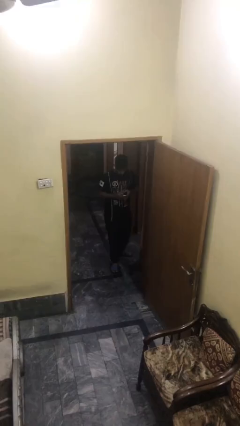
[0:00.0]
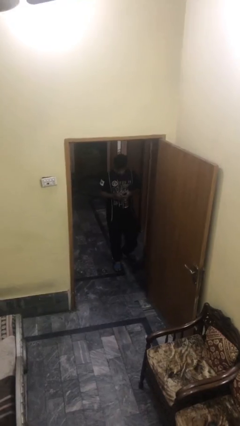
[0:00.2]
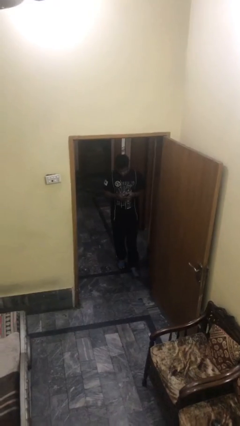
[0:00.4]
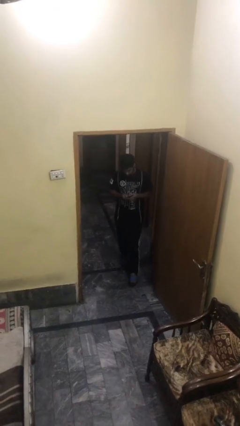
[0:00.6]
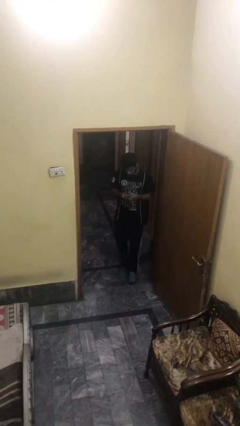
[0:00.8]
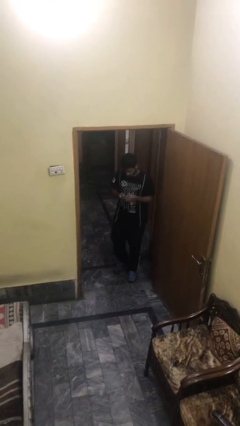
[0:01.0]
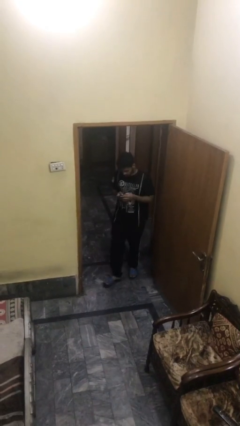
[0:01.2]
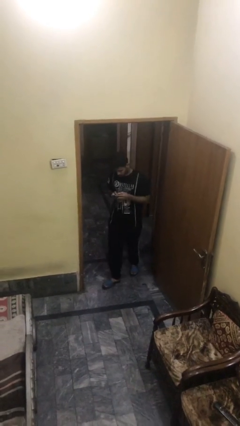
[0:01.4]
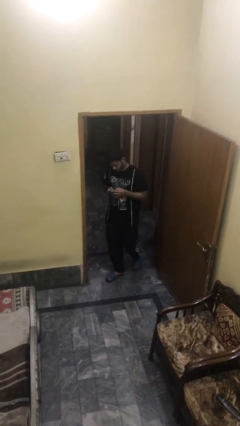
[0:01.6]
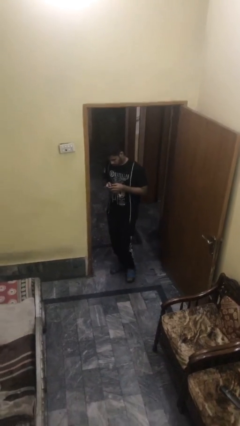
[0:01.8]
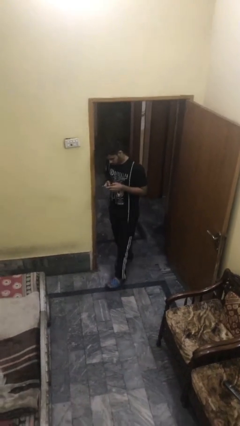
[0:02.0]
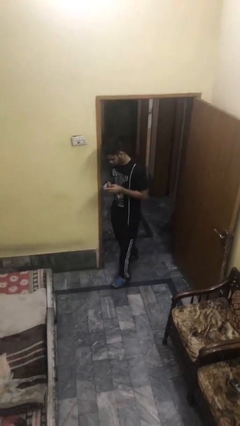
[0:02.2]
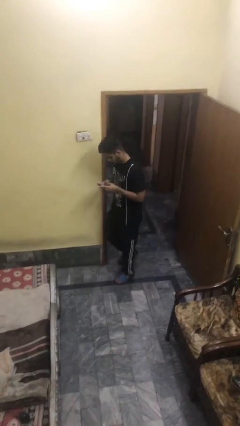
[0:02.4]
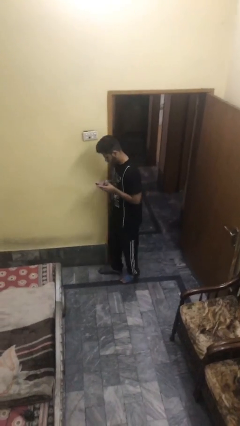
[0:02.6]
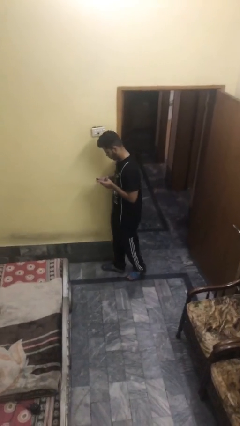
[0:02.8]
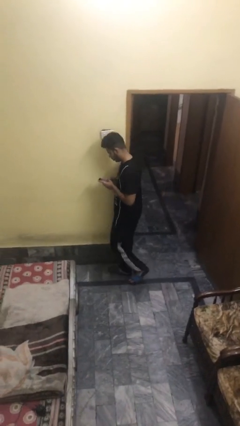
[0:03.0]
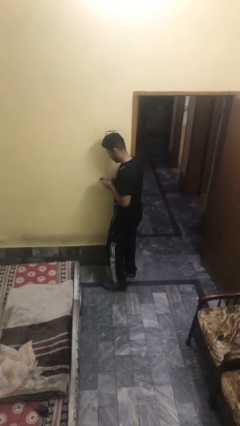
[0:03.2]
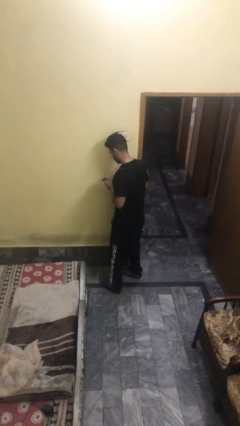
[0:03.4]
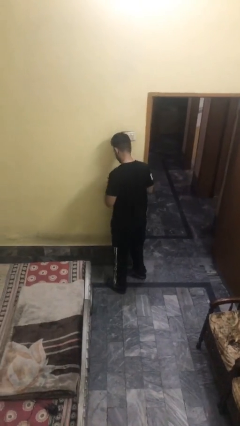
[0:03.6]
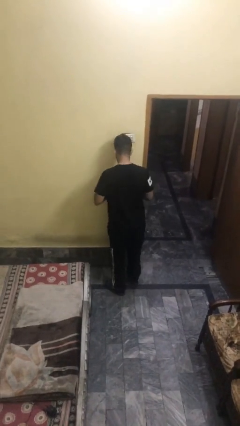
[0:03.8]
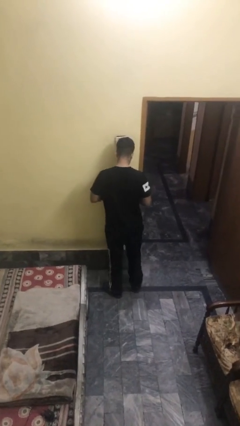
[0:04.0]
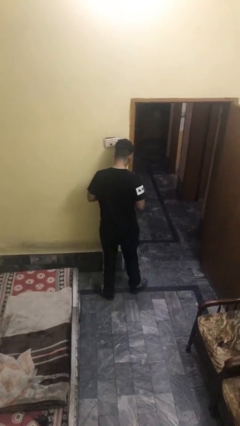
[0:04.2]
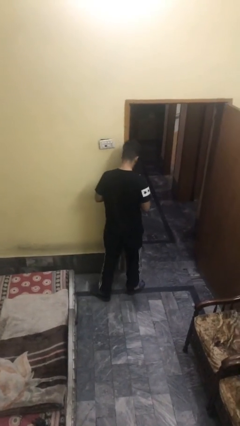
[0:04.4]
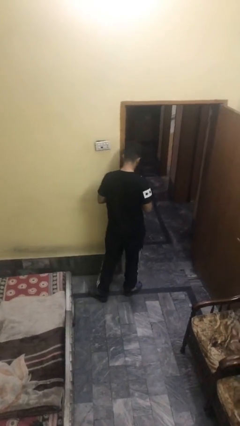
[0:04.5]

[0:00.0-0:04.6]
person enters scene through structure

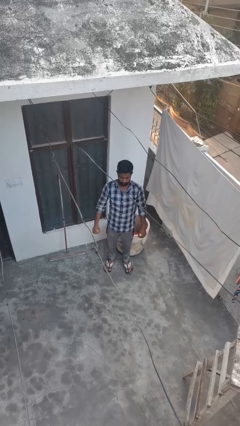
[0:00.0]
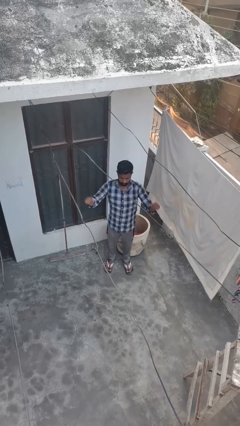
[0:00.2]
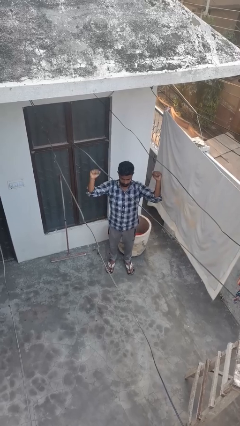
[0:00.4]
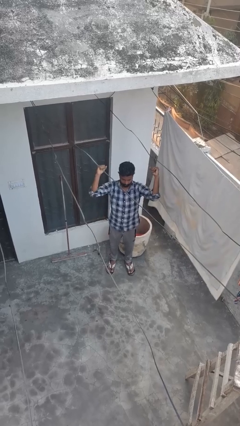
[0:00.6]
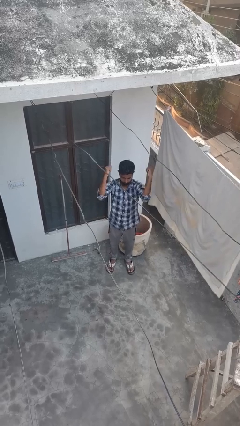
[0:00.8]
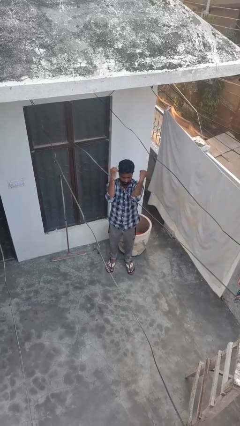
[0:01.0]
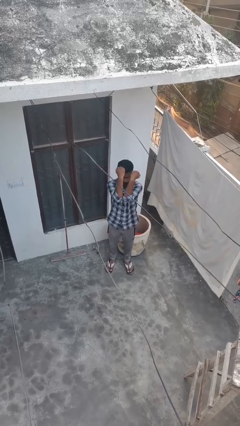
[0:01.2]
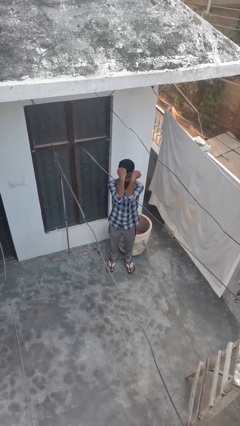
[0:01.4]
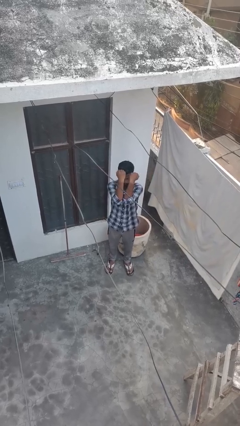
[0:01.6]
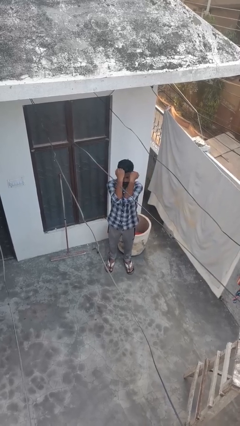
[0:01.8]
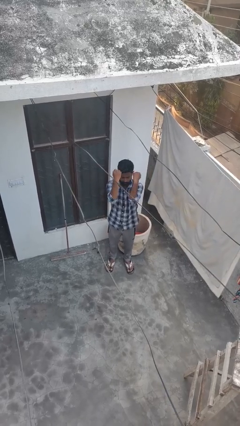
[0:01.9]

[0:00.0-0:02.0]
person gestures zoom in

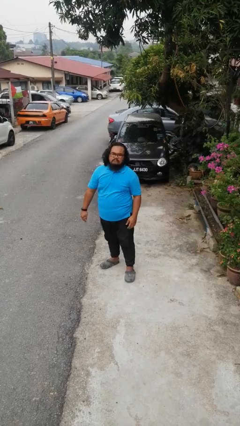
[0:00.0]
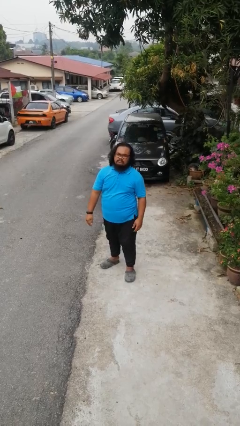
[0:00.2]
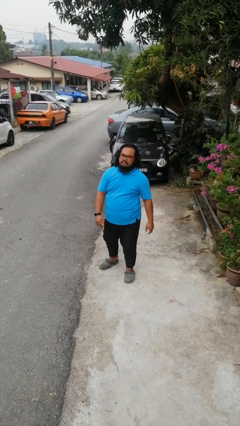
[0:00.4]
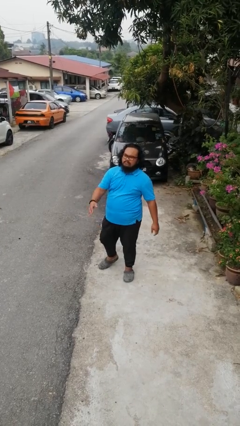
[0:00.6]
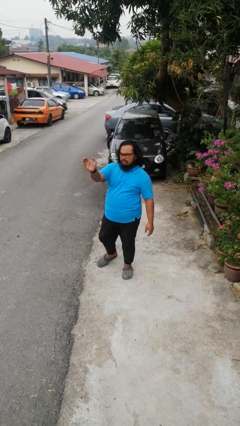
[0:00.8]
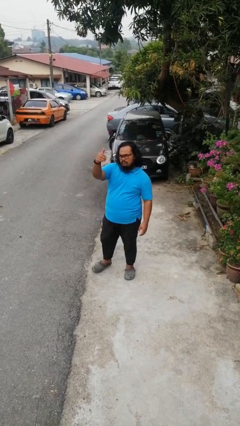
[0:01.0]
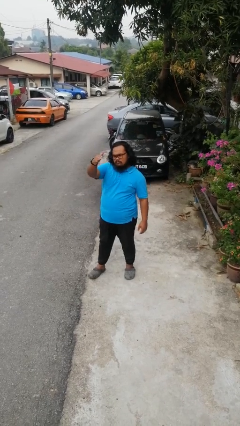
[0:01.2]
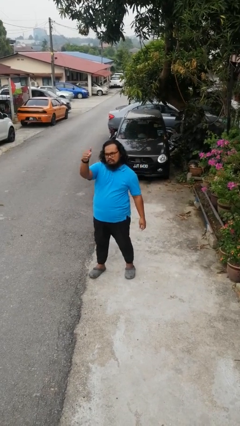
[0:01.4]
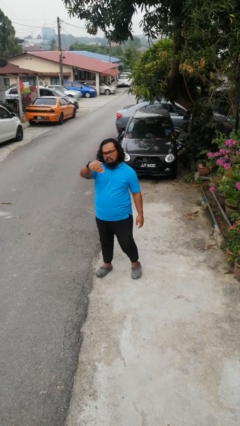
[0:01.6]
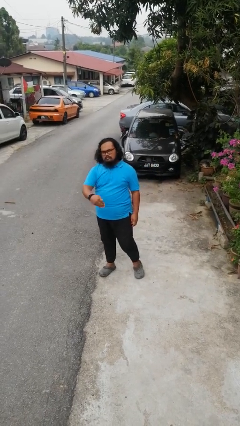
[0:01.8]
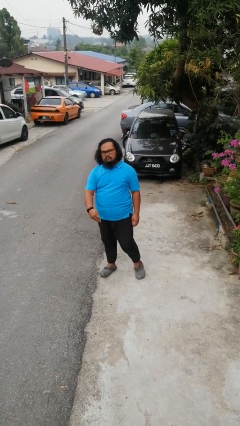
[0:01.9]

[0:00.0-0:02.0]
person gestures come here

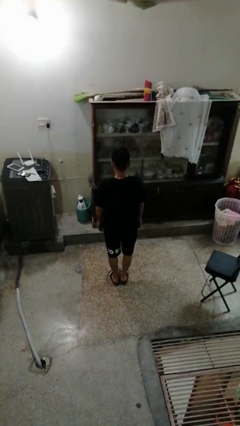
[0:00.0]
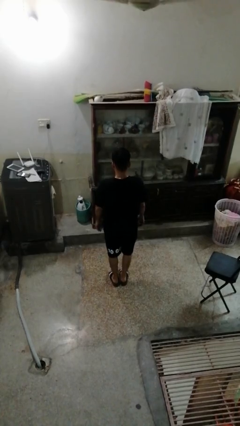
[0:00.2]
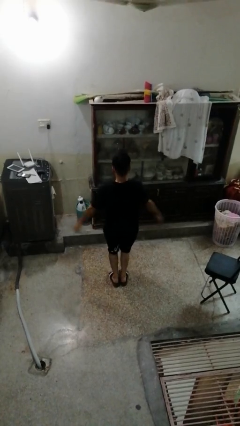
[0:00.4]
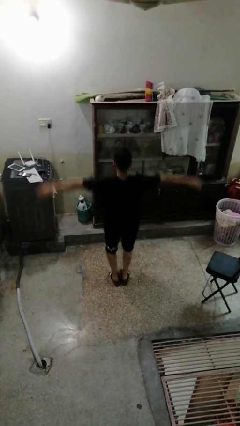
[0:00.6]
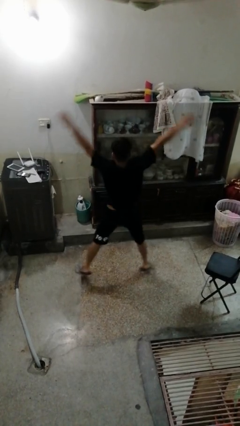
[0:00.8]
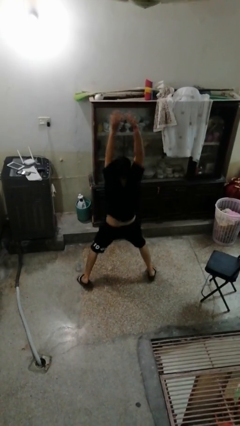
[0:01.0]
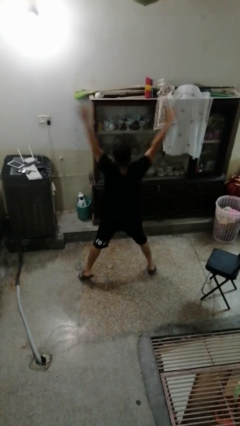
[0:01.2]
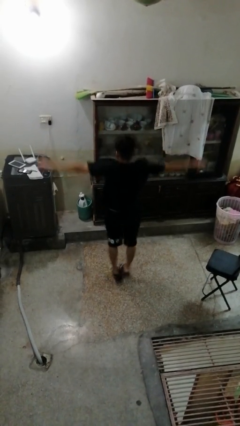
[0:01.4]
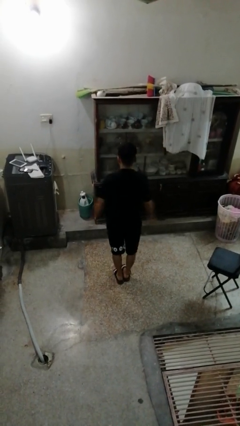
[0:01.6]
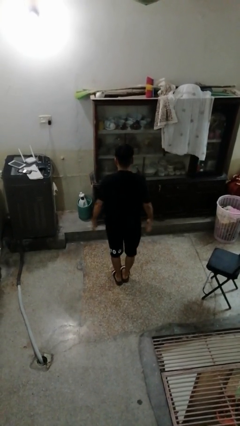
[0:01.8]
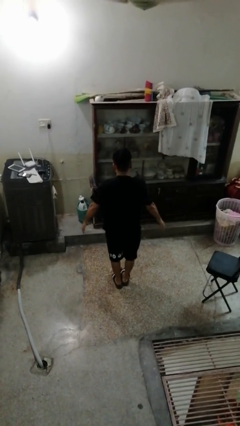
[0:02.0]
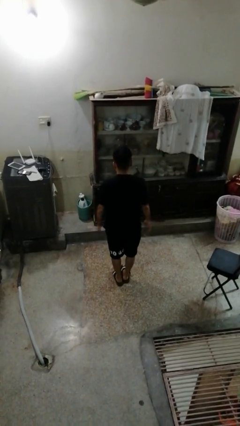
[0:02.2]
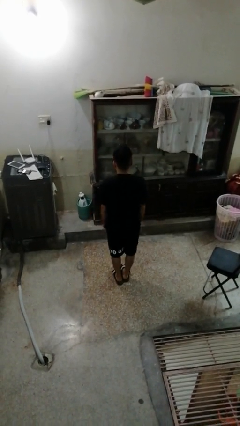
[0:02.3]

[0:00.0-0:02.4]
person exercises with jumping jacks

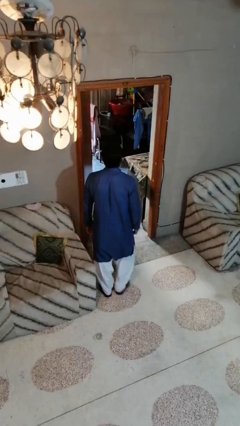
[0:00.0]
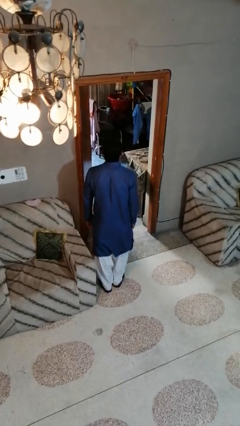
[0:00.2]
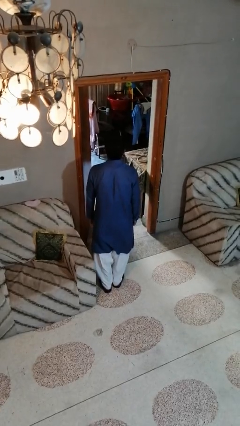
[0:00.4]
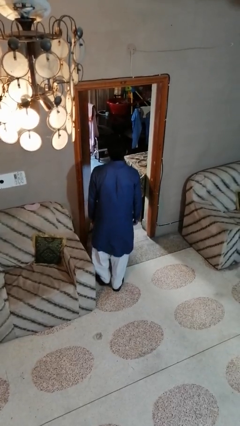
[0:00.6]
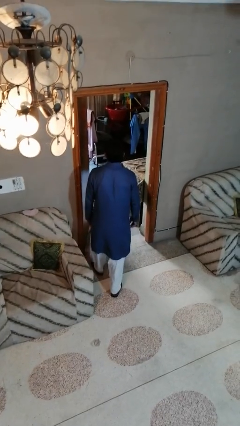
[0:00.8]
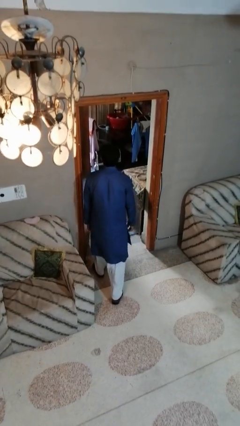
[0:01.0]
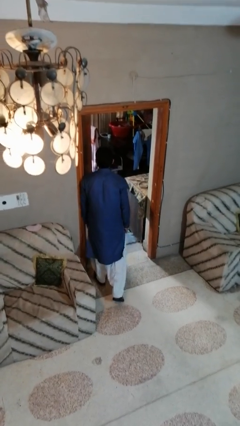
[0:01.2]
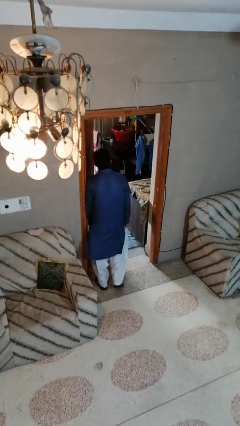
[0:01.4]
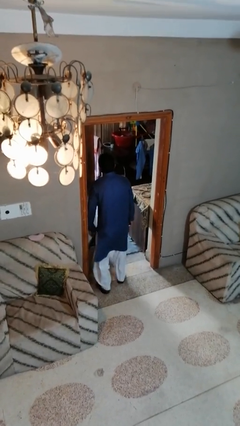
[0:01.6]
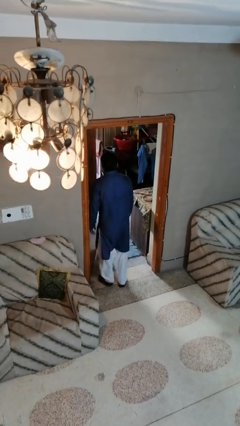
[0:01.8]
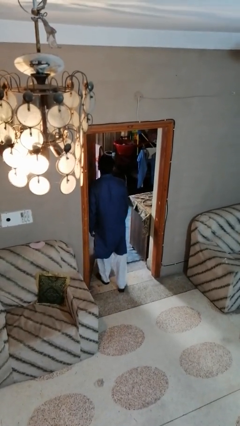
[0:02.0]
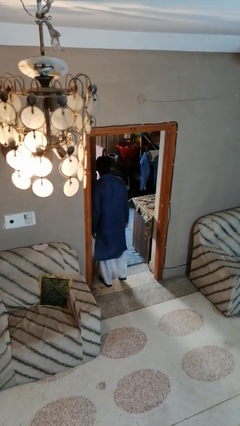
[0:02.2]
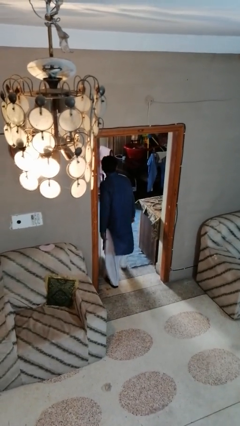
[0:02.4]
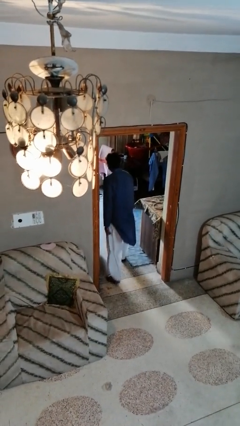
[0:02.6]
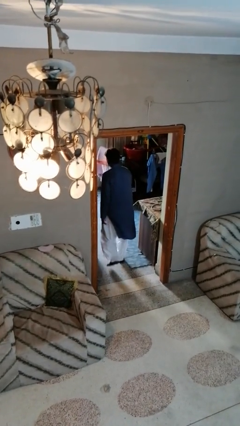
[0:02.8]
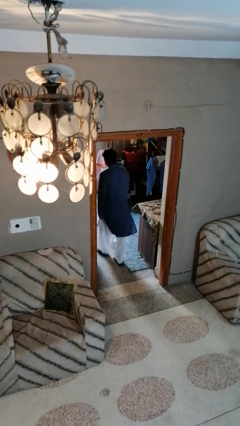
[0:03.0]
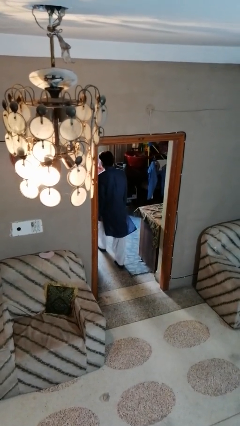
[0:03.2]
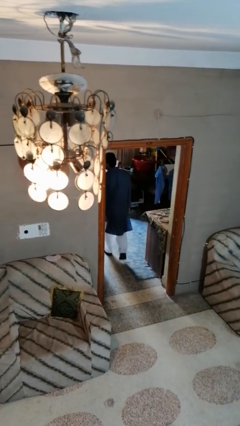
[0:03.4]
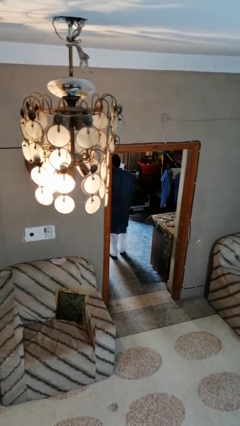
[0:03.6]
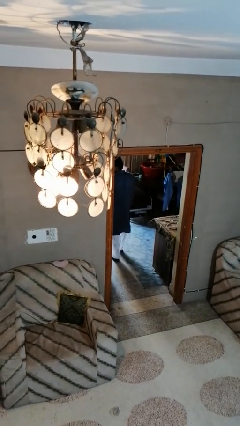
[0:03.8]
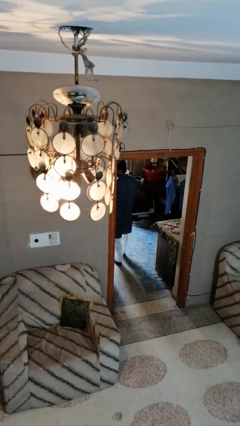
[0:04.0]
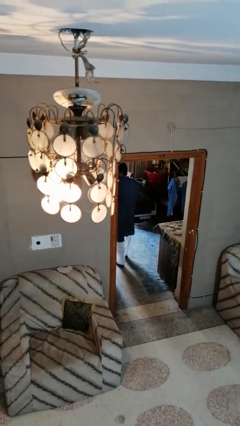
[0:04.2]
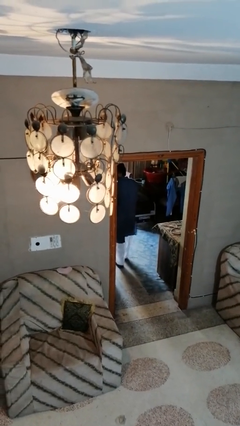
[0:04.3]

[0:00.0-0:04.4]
person bumps into wall

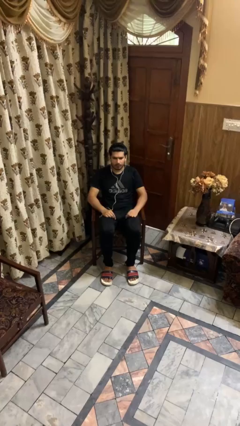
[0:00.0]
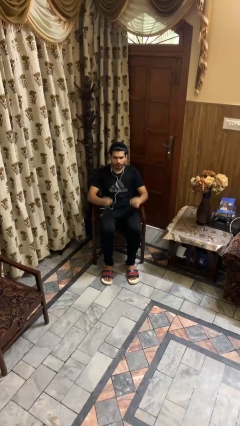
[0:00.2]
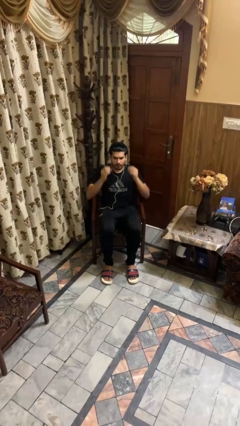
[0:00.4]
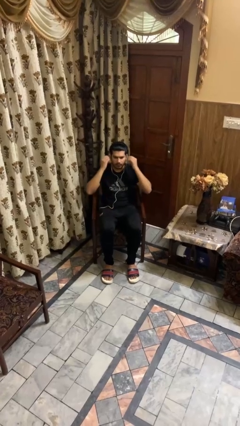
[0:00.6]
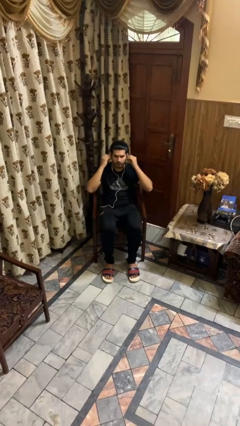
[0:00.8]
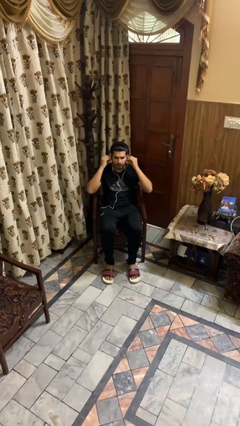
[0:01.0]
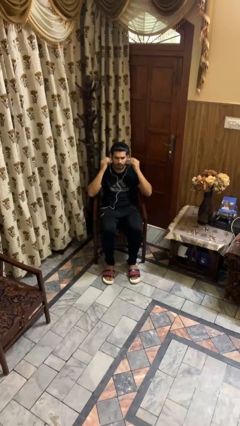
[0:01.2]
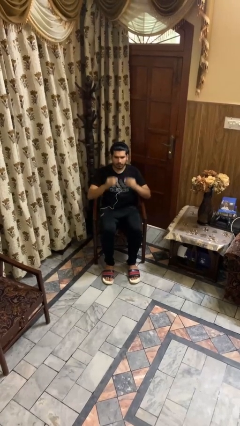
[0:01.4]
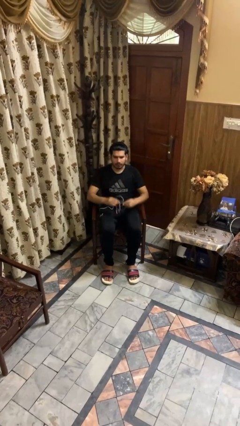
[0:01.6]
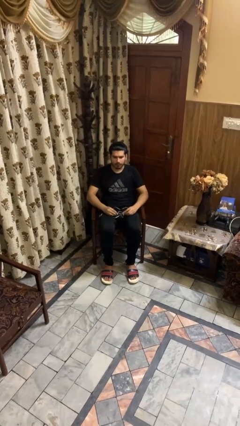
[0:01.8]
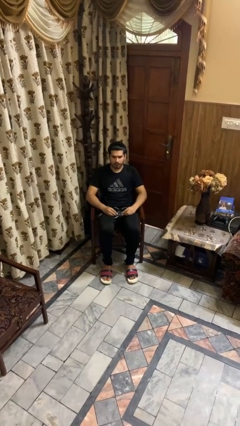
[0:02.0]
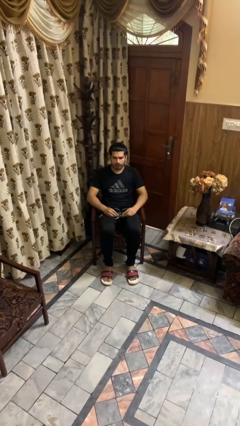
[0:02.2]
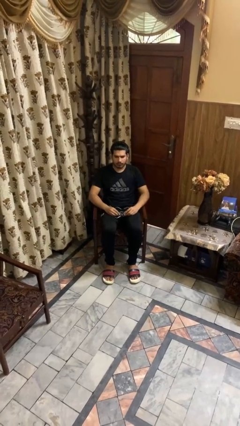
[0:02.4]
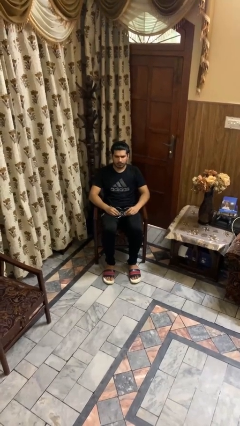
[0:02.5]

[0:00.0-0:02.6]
person takes off headphones
